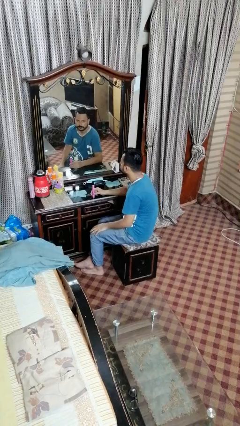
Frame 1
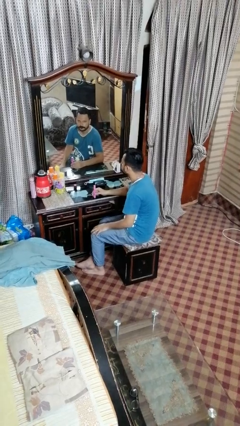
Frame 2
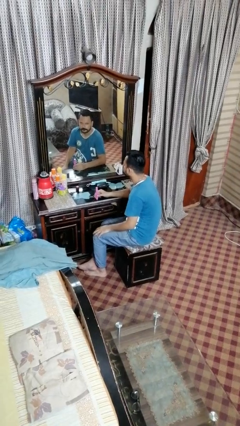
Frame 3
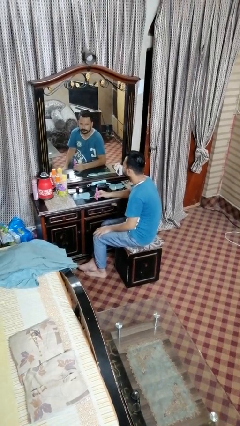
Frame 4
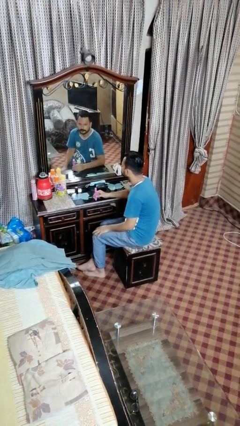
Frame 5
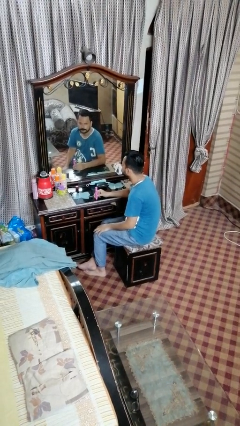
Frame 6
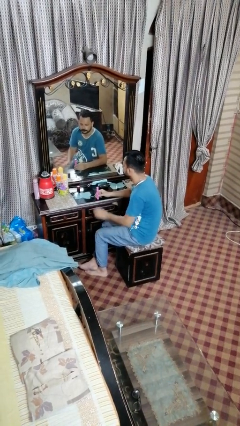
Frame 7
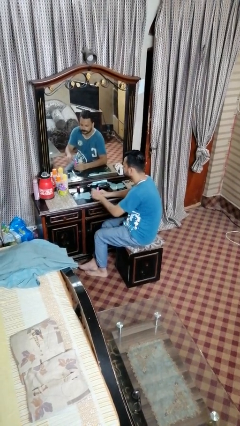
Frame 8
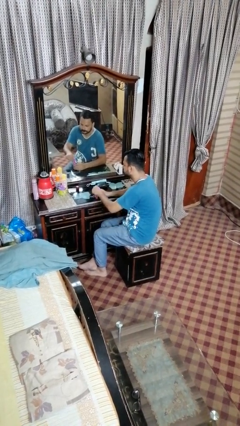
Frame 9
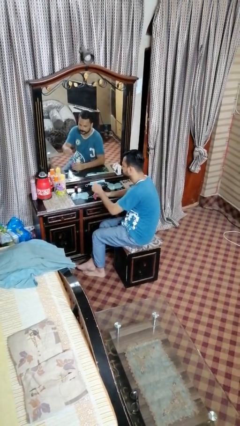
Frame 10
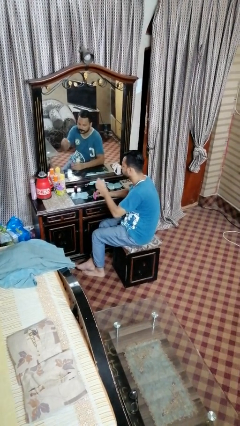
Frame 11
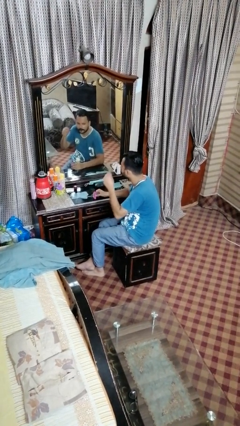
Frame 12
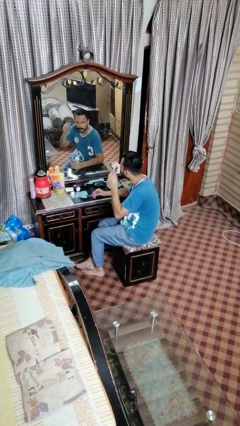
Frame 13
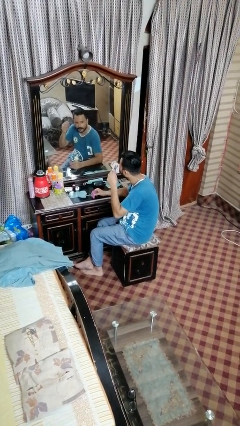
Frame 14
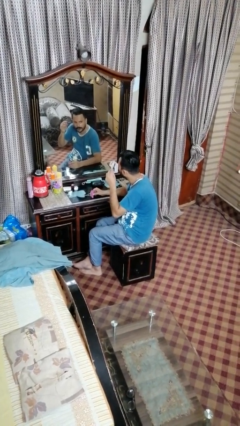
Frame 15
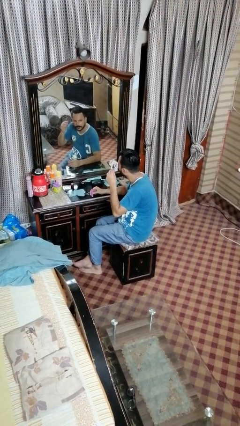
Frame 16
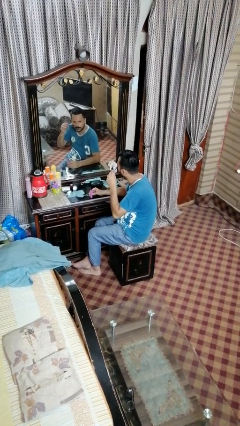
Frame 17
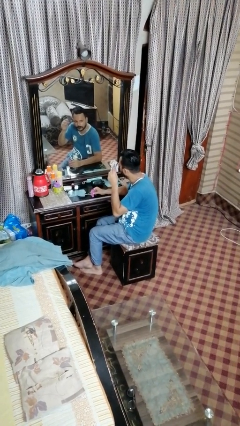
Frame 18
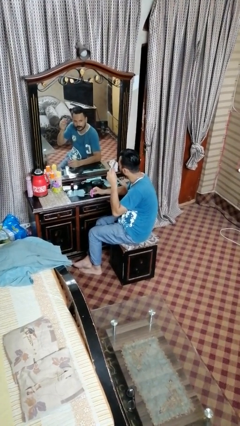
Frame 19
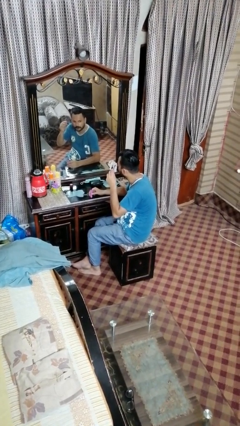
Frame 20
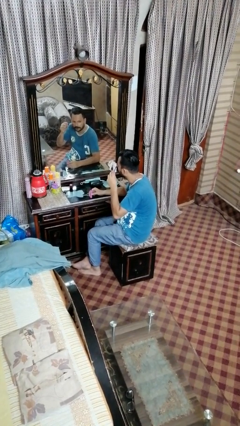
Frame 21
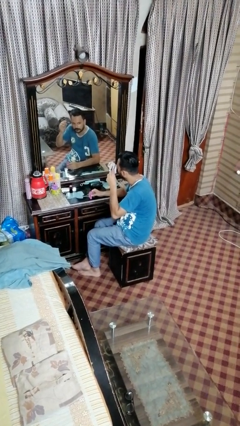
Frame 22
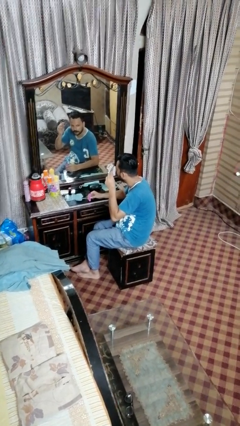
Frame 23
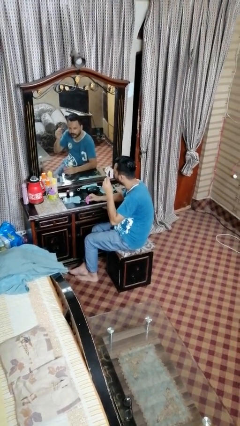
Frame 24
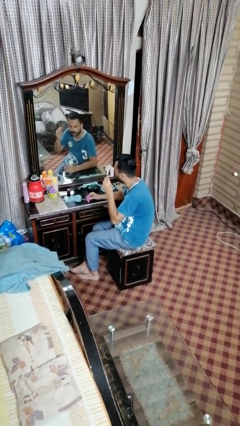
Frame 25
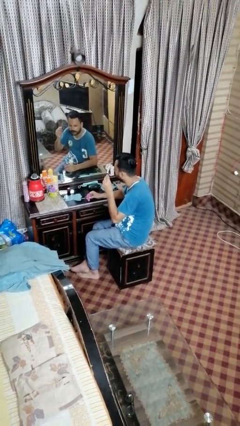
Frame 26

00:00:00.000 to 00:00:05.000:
person applies eye makeup

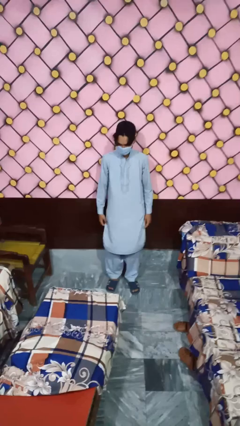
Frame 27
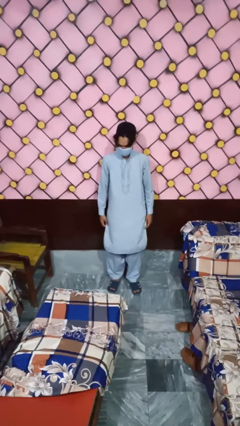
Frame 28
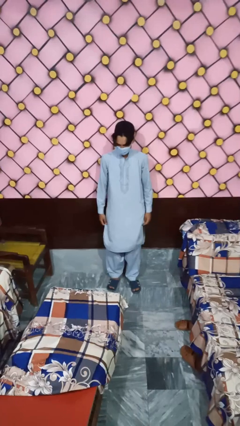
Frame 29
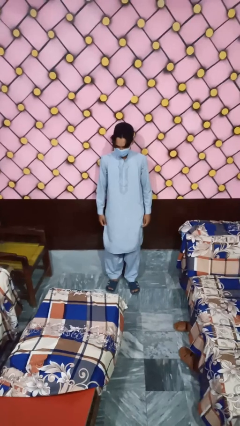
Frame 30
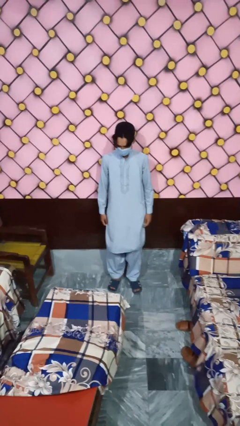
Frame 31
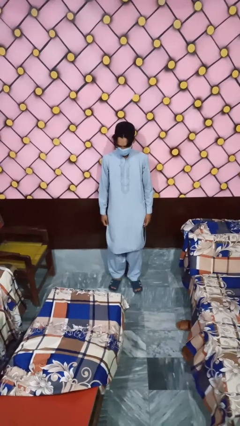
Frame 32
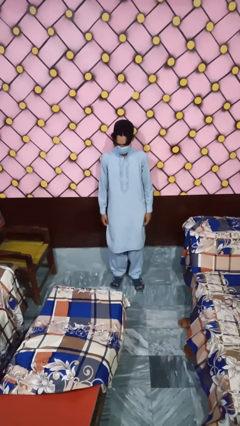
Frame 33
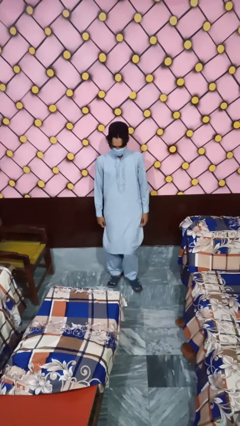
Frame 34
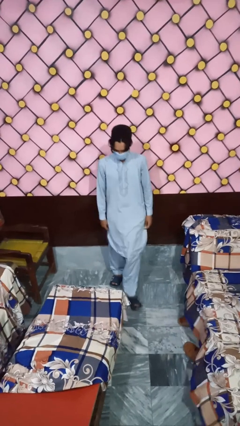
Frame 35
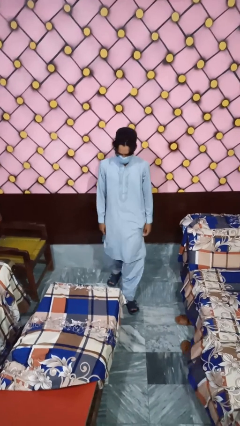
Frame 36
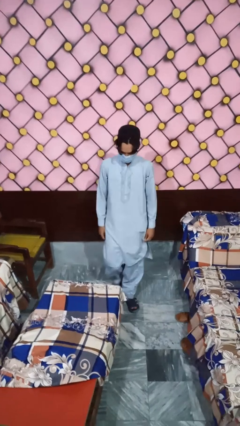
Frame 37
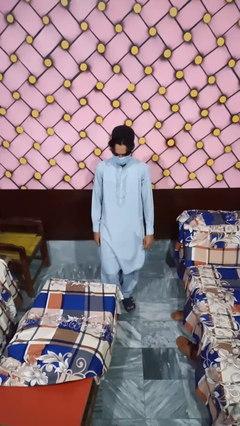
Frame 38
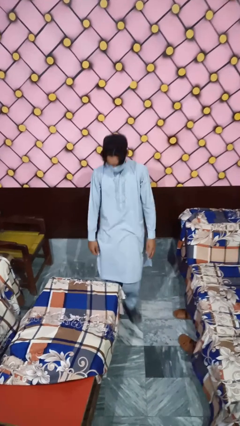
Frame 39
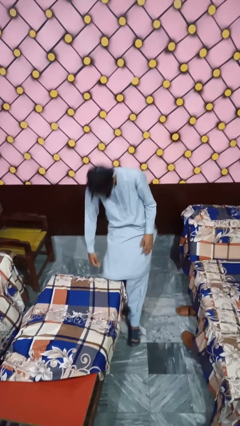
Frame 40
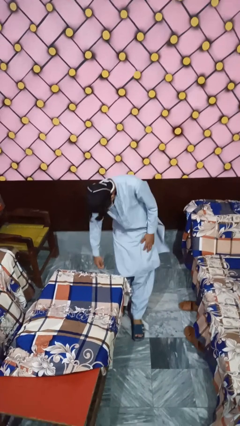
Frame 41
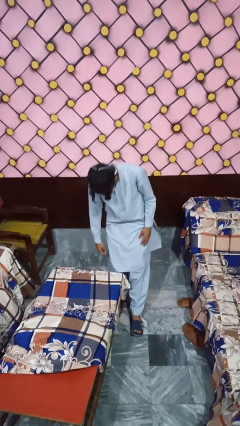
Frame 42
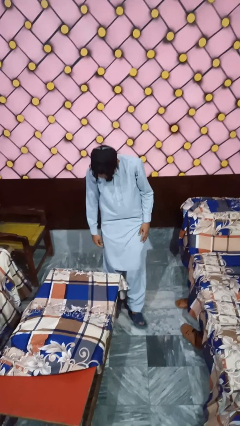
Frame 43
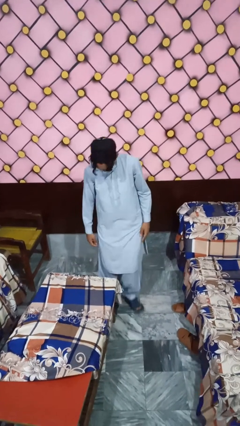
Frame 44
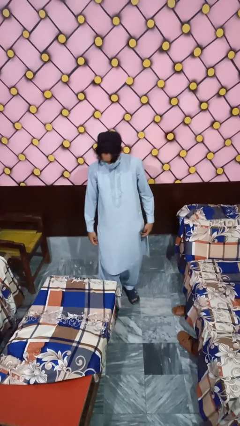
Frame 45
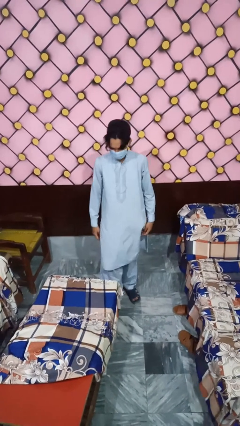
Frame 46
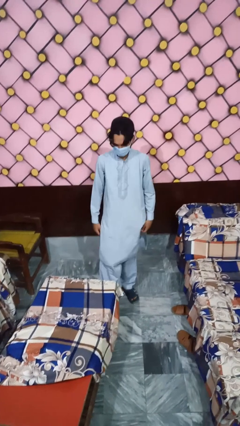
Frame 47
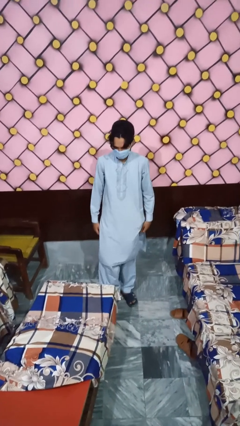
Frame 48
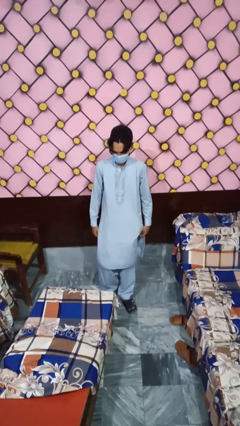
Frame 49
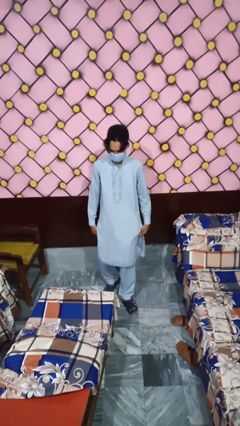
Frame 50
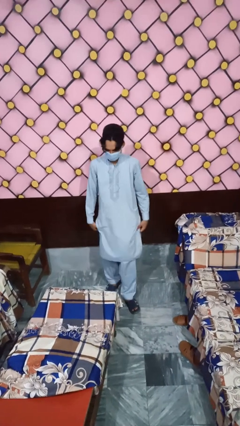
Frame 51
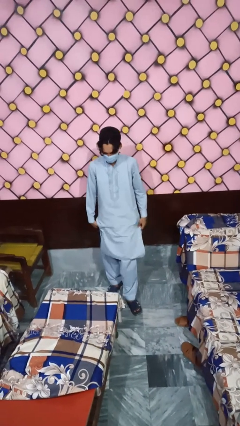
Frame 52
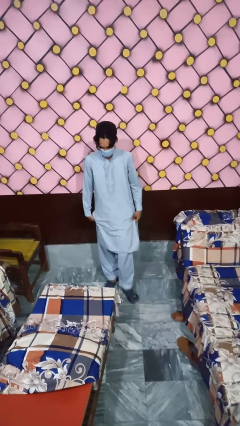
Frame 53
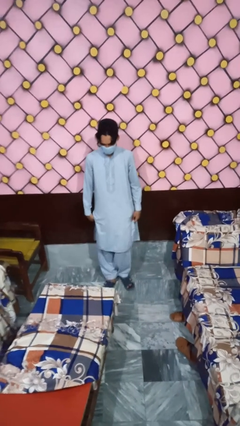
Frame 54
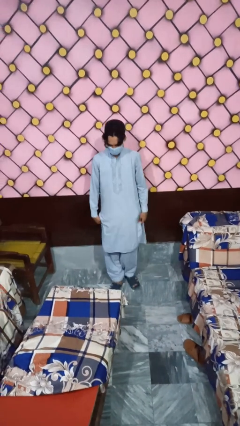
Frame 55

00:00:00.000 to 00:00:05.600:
person bumps into table

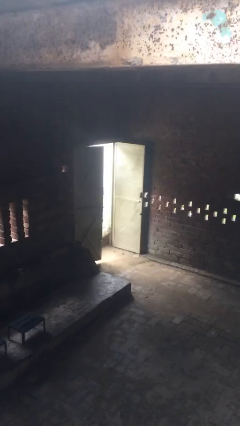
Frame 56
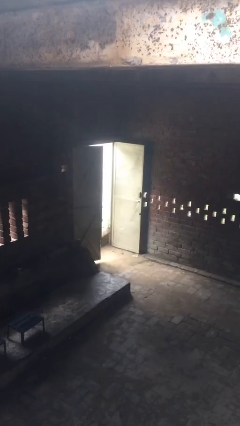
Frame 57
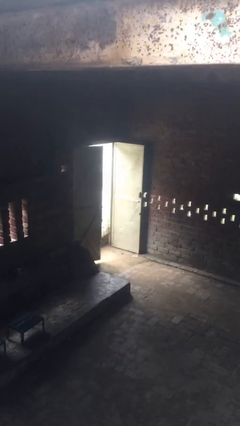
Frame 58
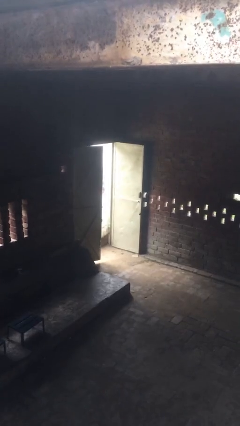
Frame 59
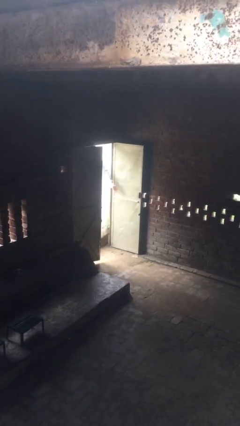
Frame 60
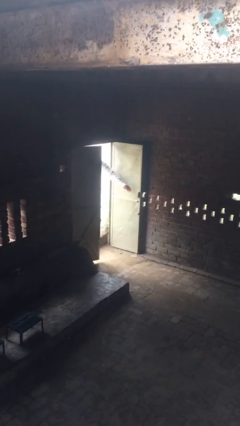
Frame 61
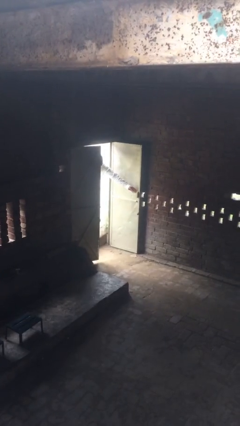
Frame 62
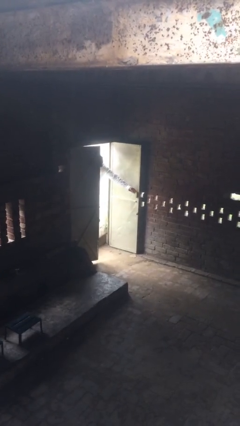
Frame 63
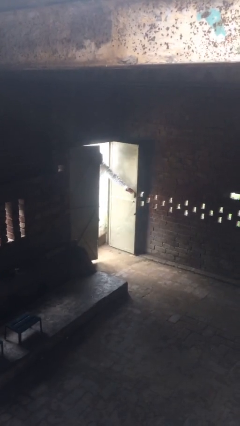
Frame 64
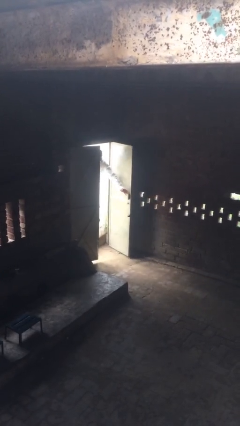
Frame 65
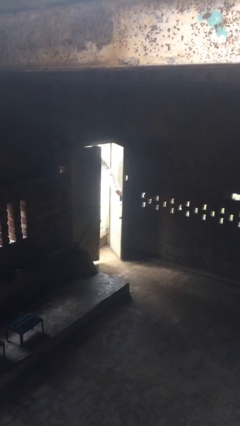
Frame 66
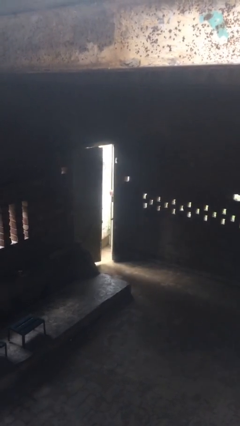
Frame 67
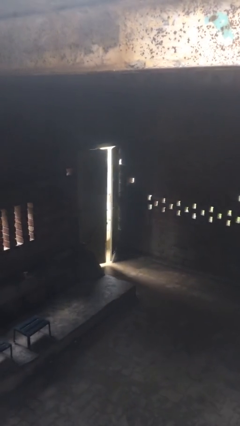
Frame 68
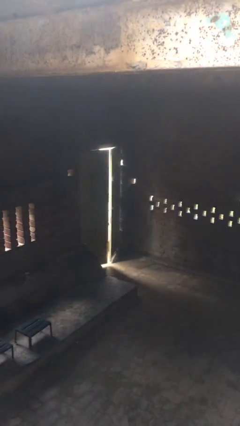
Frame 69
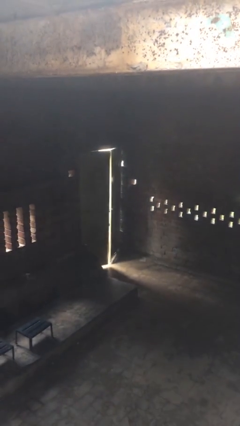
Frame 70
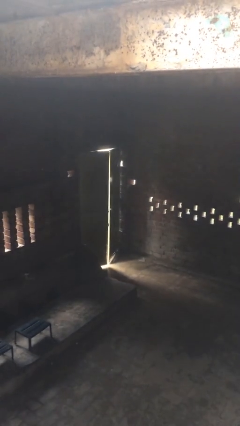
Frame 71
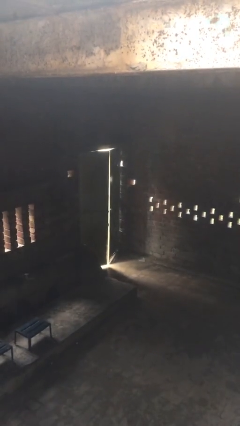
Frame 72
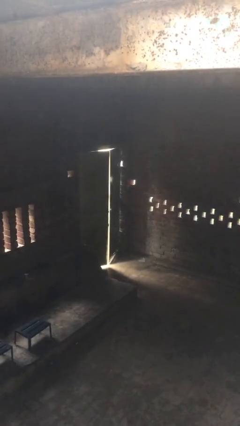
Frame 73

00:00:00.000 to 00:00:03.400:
person closes facility door

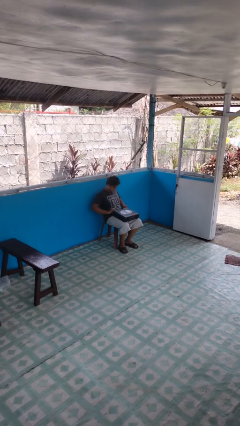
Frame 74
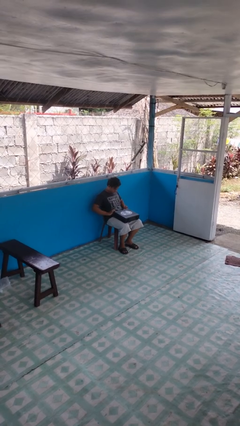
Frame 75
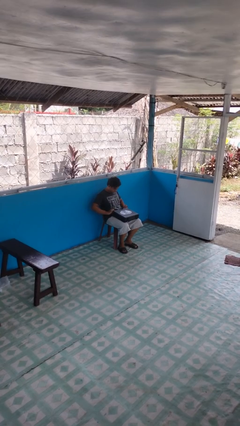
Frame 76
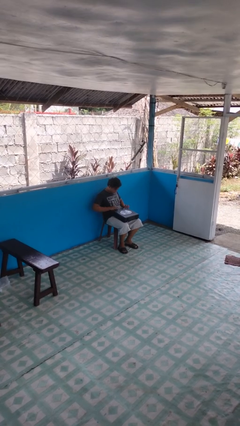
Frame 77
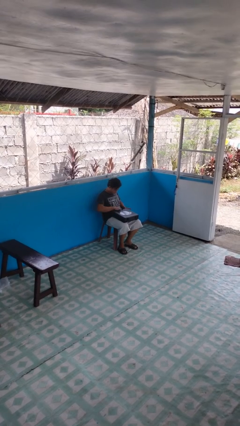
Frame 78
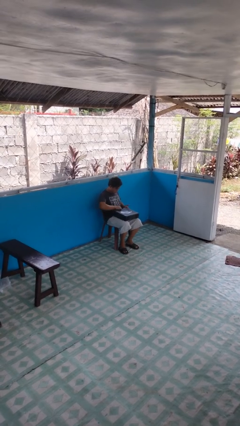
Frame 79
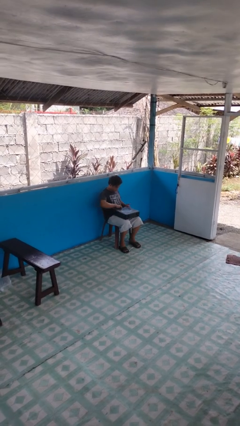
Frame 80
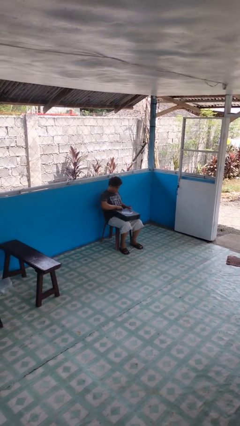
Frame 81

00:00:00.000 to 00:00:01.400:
person opens suitcase

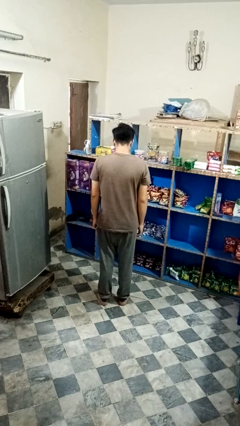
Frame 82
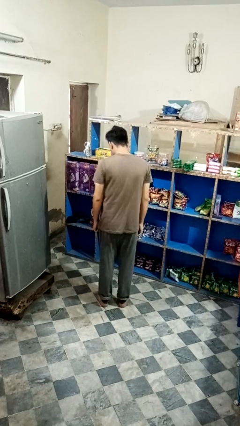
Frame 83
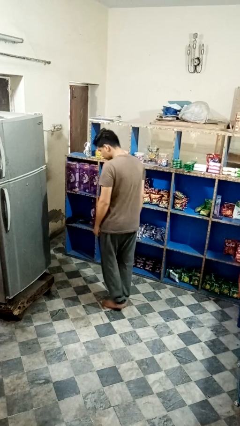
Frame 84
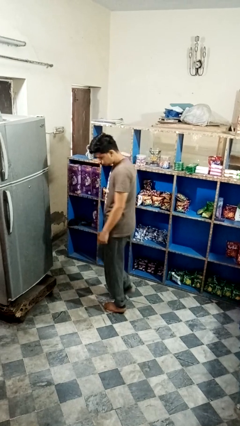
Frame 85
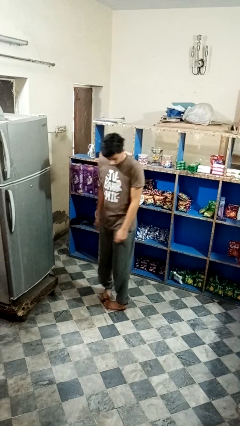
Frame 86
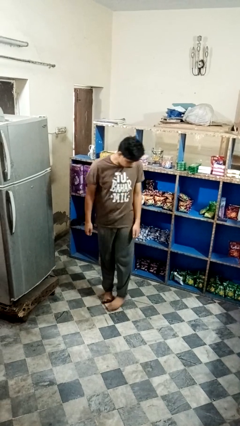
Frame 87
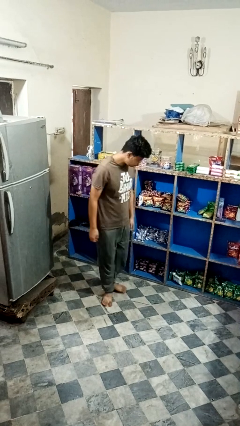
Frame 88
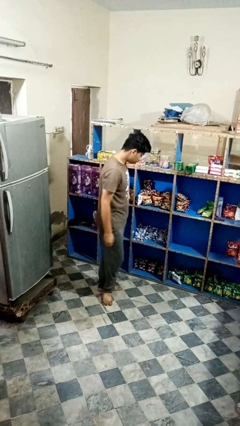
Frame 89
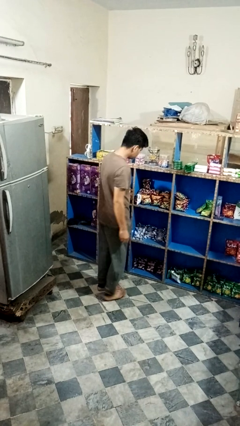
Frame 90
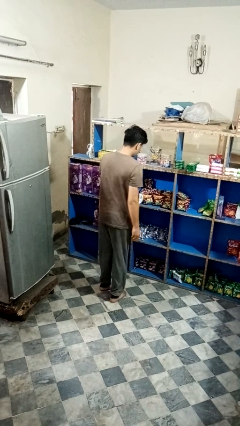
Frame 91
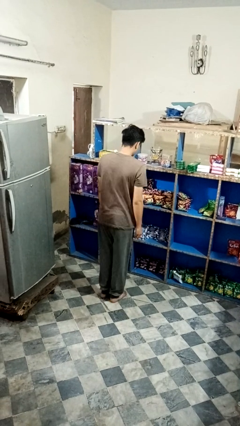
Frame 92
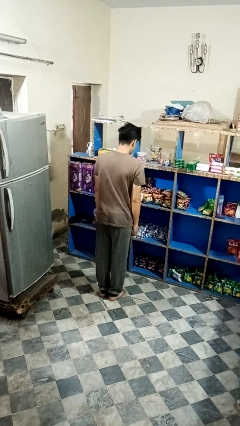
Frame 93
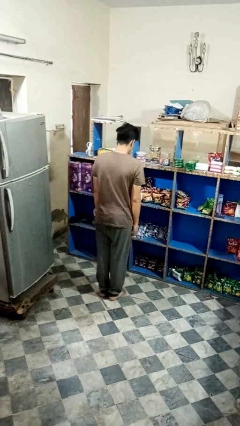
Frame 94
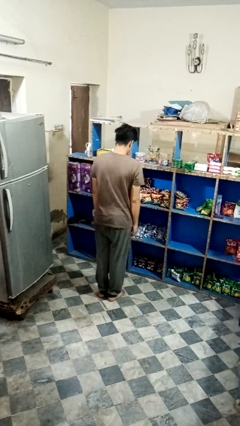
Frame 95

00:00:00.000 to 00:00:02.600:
person twirls
